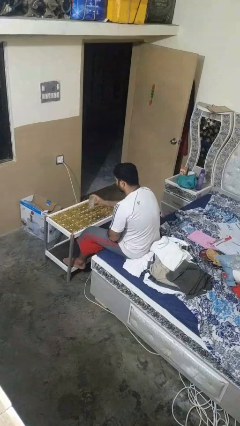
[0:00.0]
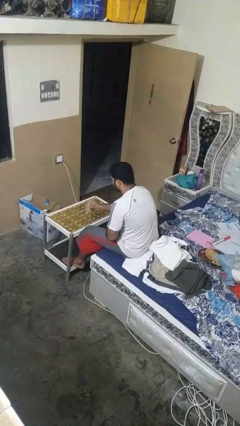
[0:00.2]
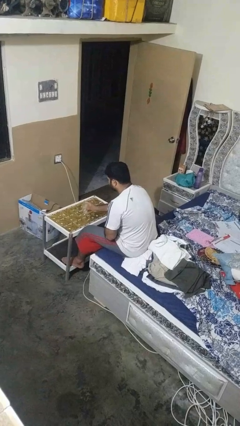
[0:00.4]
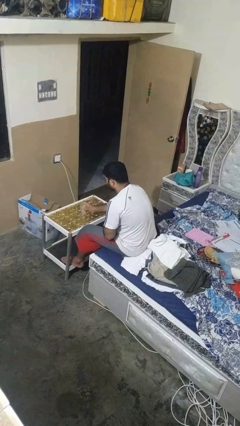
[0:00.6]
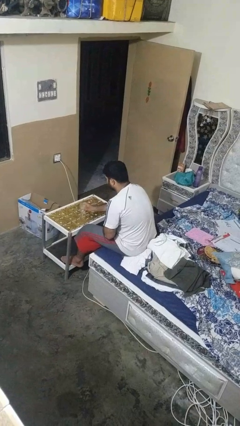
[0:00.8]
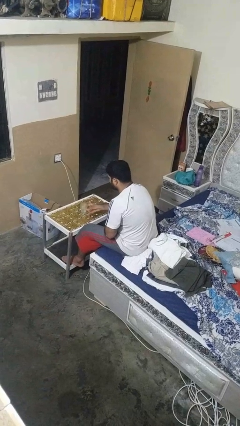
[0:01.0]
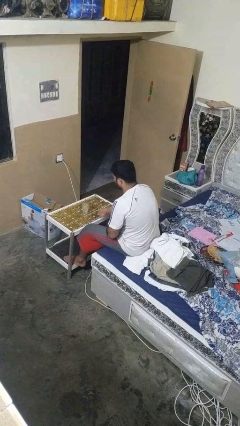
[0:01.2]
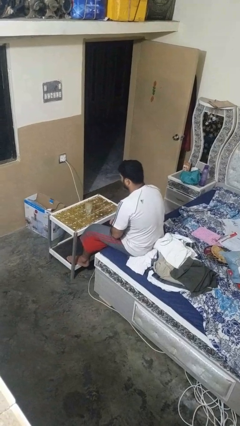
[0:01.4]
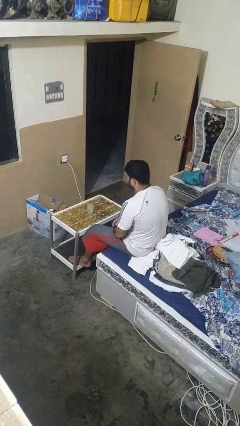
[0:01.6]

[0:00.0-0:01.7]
person puts down object on table

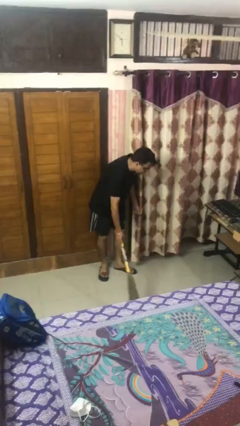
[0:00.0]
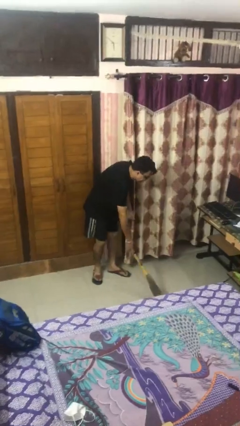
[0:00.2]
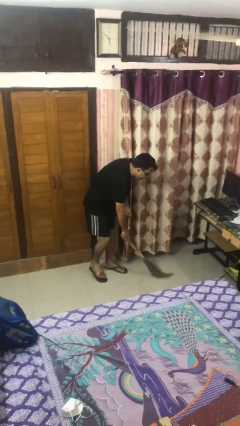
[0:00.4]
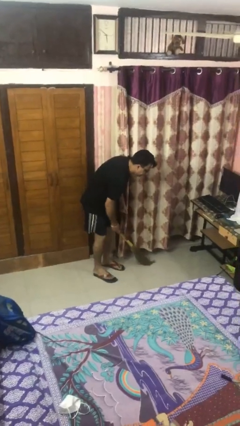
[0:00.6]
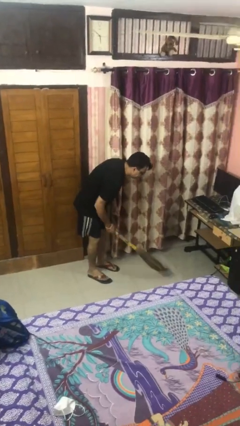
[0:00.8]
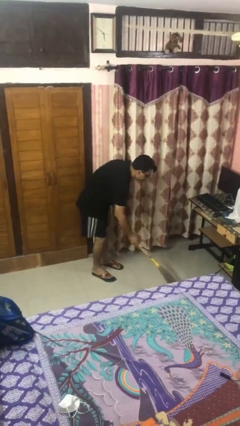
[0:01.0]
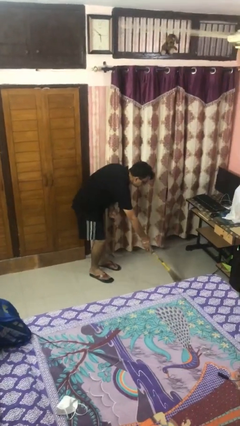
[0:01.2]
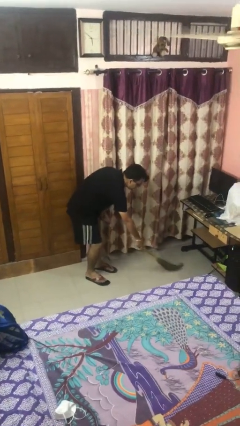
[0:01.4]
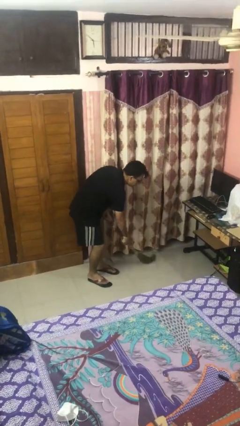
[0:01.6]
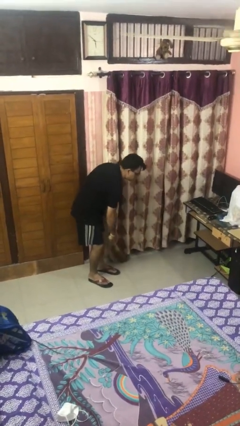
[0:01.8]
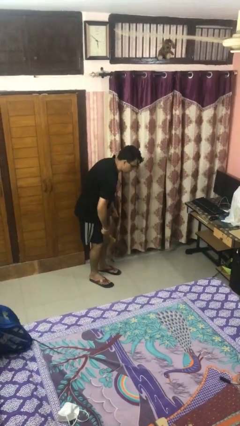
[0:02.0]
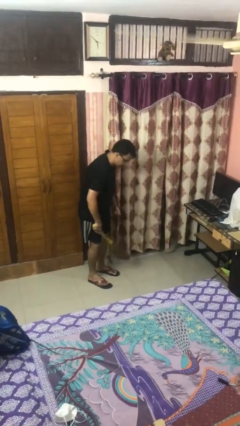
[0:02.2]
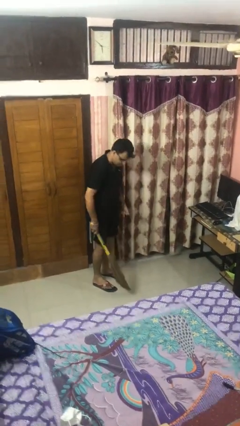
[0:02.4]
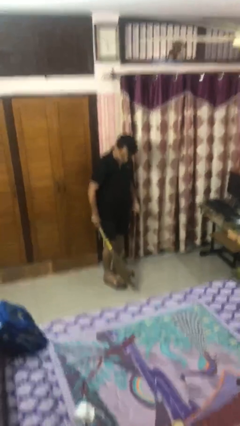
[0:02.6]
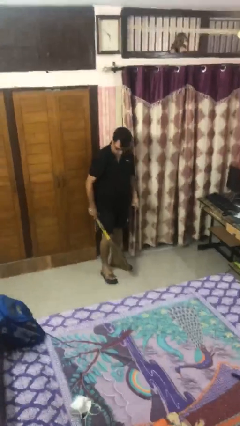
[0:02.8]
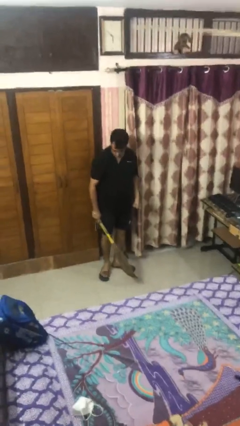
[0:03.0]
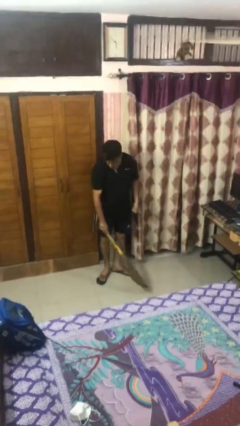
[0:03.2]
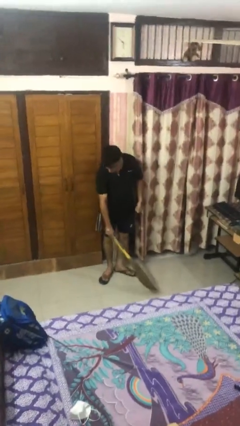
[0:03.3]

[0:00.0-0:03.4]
person sweeps floor

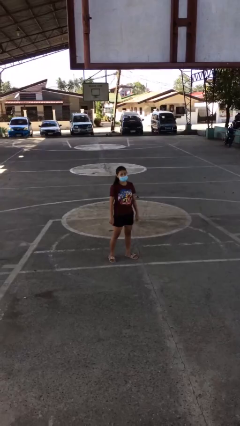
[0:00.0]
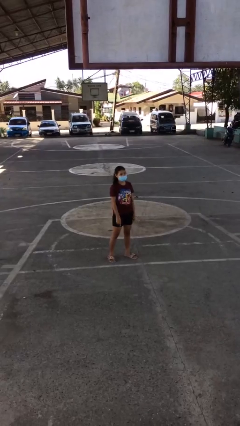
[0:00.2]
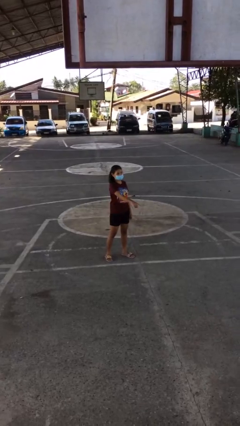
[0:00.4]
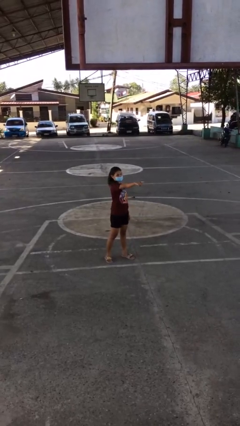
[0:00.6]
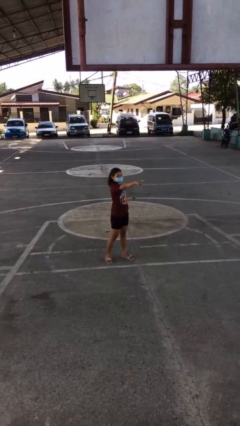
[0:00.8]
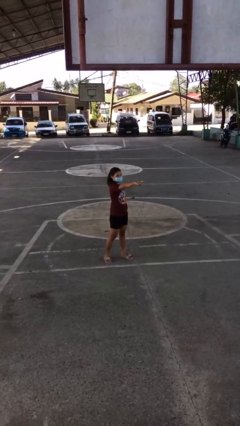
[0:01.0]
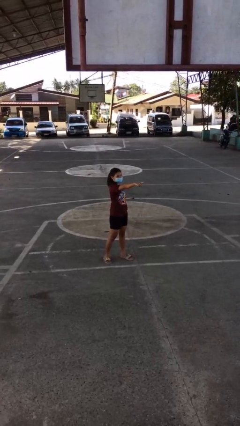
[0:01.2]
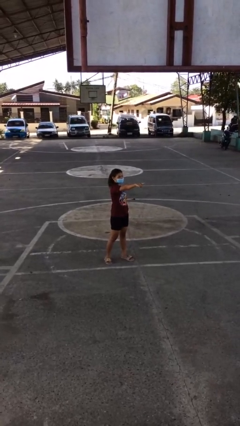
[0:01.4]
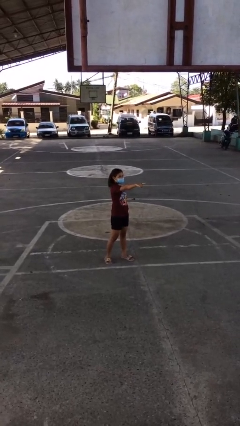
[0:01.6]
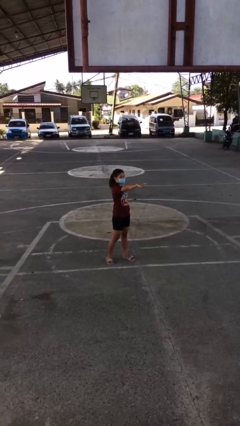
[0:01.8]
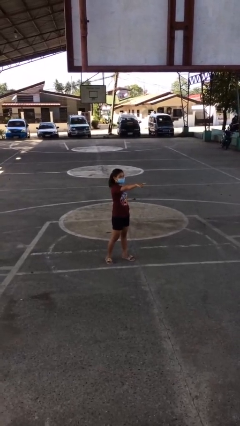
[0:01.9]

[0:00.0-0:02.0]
person points at person

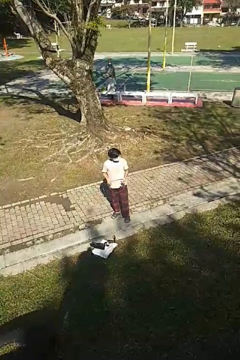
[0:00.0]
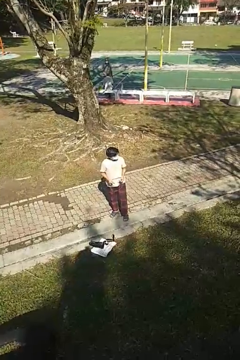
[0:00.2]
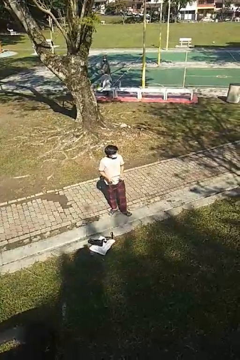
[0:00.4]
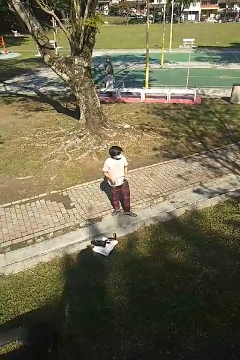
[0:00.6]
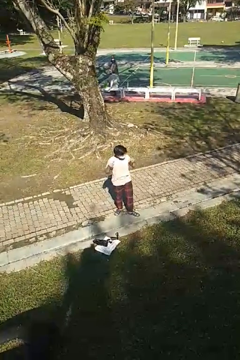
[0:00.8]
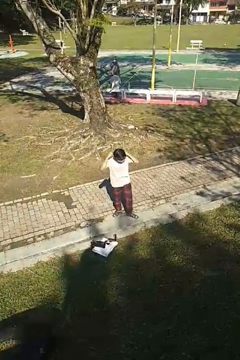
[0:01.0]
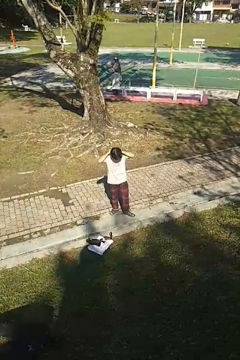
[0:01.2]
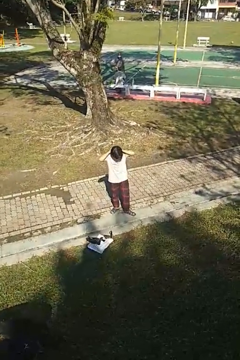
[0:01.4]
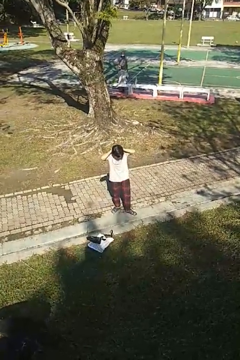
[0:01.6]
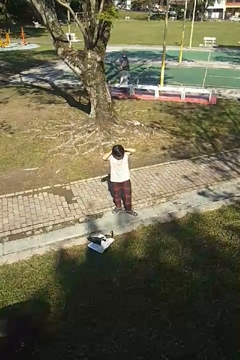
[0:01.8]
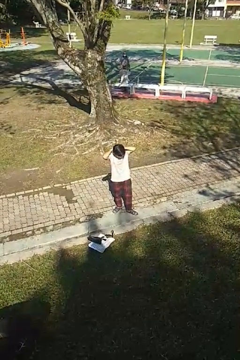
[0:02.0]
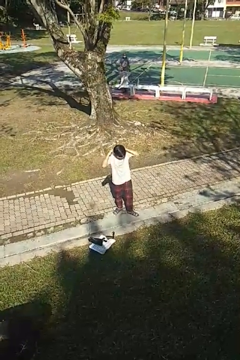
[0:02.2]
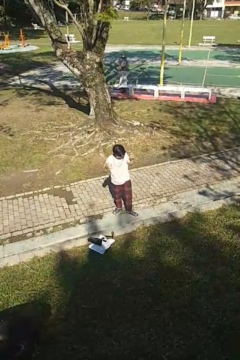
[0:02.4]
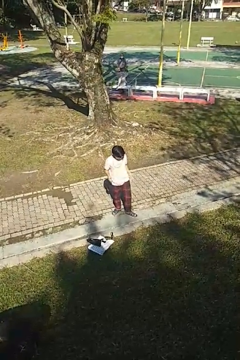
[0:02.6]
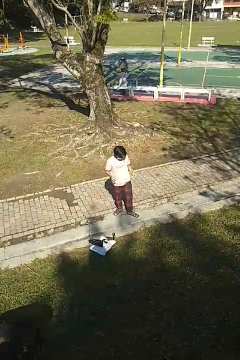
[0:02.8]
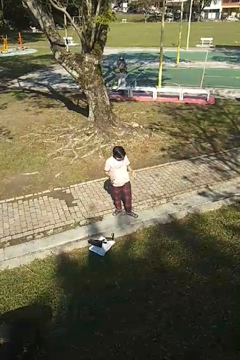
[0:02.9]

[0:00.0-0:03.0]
person puts on necklace

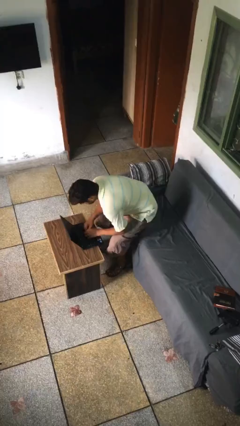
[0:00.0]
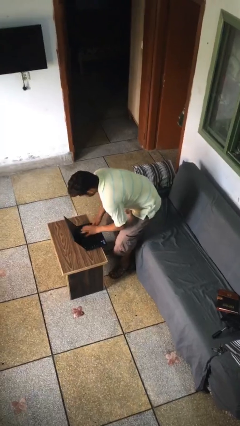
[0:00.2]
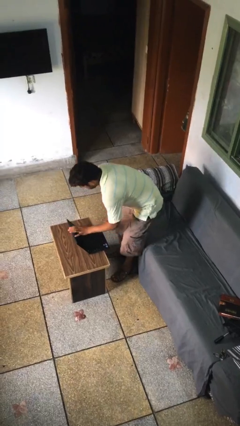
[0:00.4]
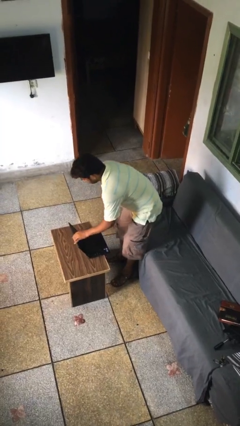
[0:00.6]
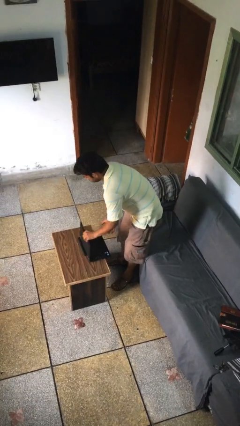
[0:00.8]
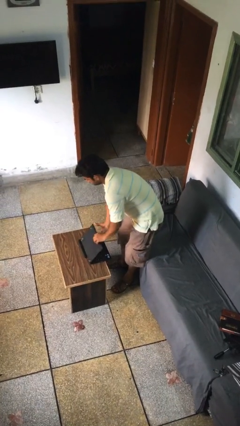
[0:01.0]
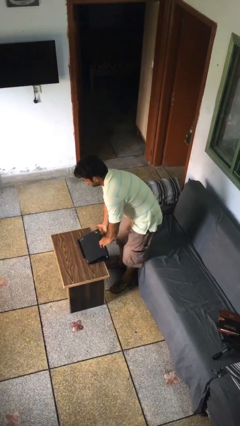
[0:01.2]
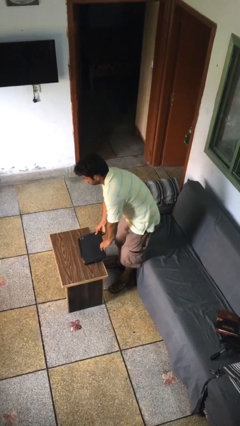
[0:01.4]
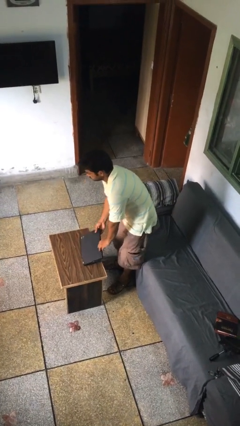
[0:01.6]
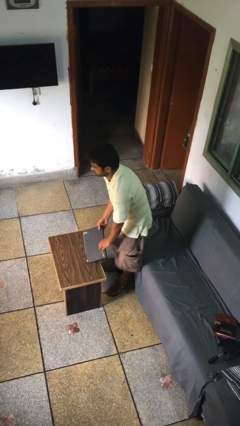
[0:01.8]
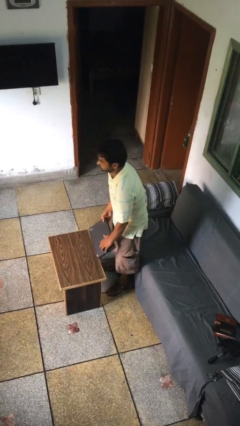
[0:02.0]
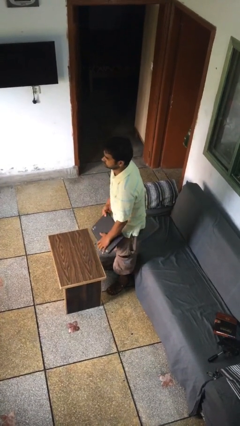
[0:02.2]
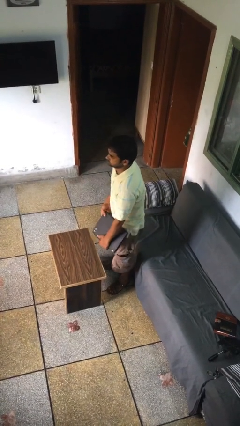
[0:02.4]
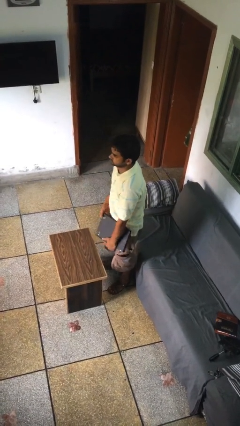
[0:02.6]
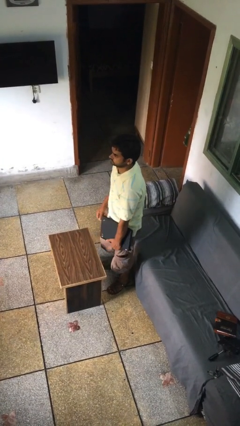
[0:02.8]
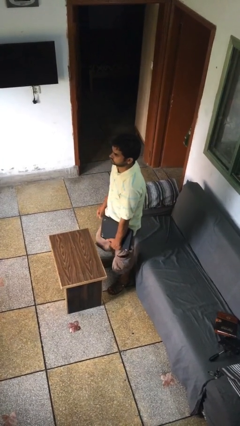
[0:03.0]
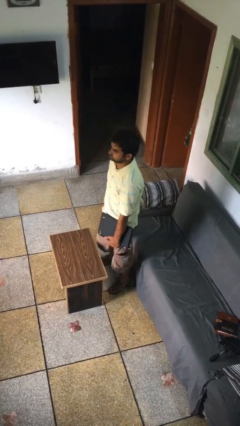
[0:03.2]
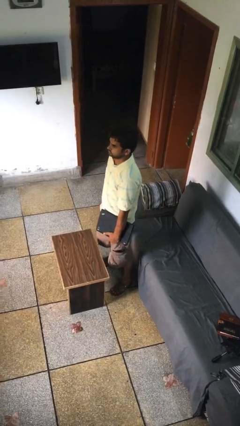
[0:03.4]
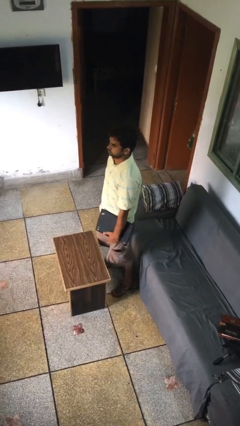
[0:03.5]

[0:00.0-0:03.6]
person stands up

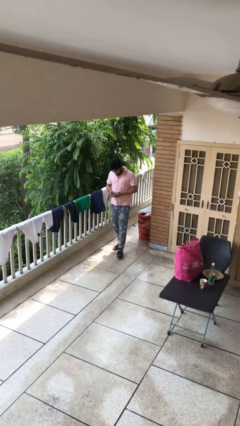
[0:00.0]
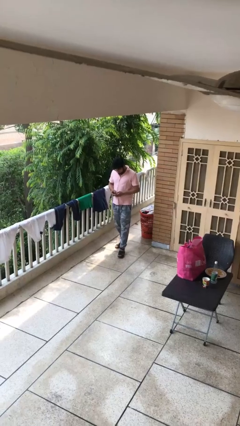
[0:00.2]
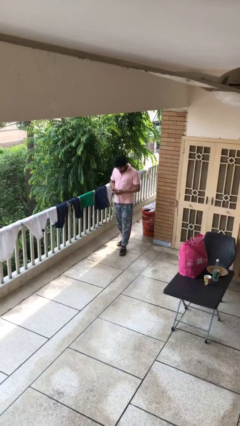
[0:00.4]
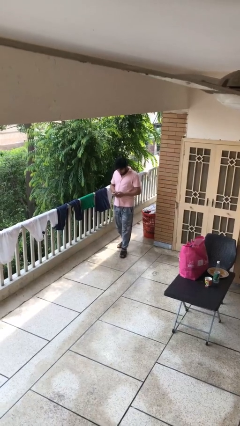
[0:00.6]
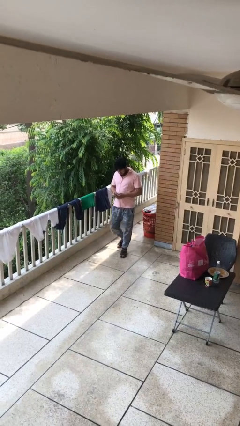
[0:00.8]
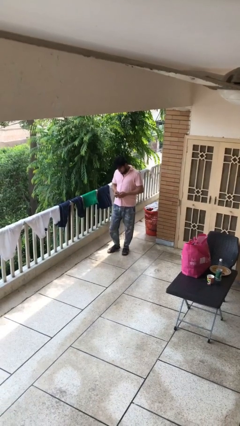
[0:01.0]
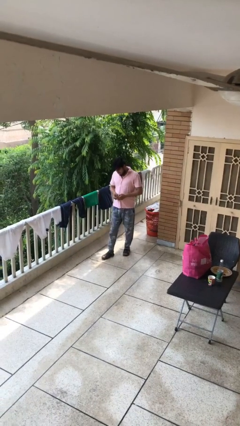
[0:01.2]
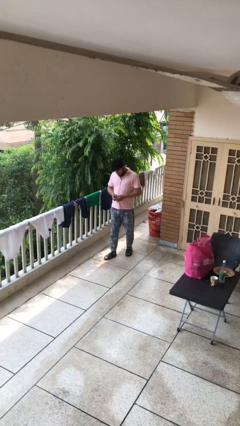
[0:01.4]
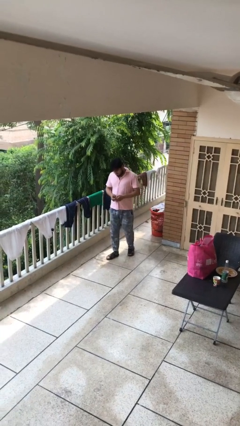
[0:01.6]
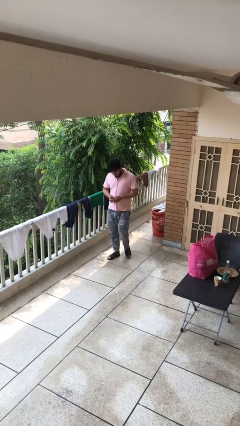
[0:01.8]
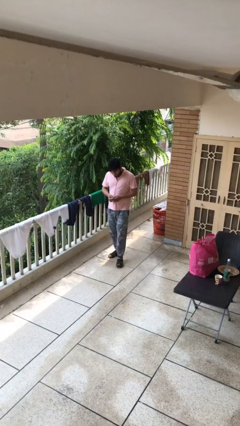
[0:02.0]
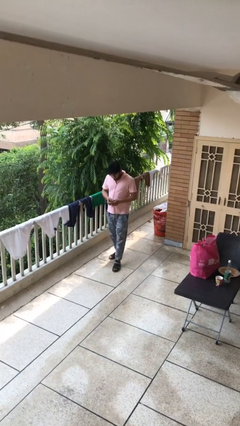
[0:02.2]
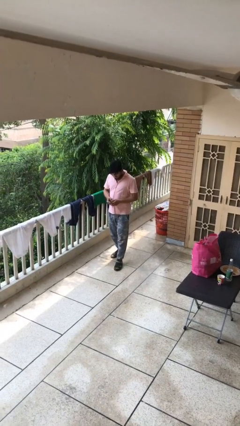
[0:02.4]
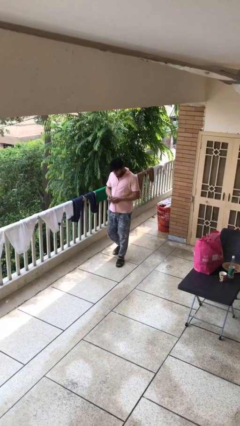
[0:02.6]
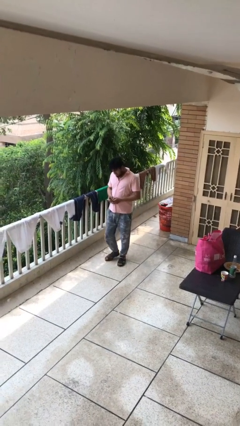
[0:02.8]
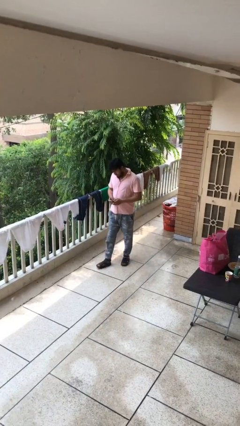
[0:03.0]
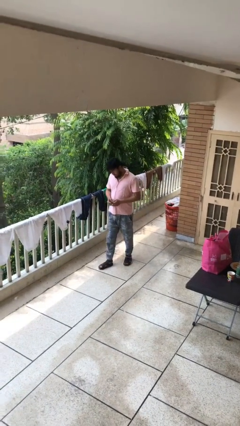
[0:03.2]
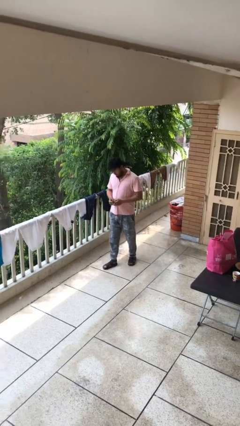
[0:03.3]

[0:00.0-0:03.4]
person texts on phone

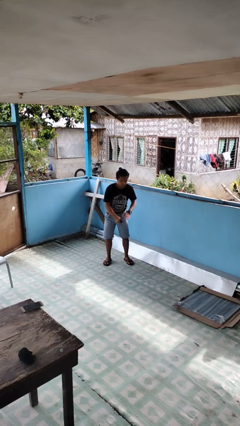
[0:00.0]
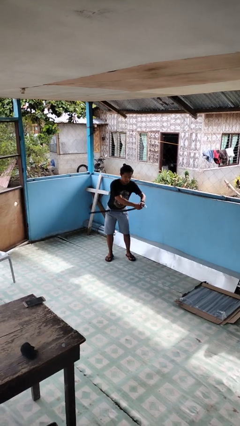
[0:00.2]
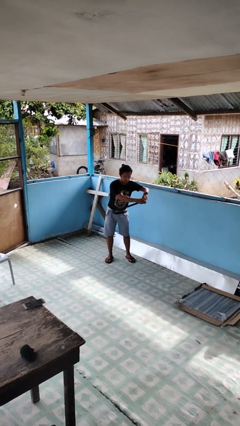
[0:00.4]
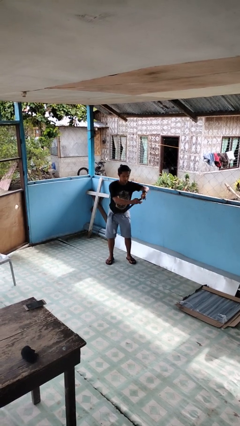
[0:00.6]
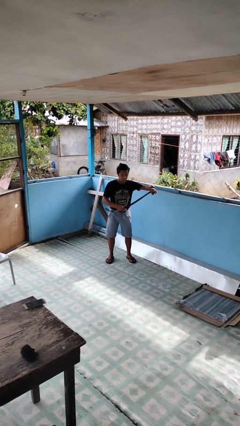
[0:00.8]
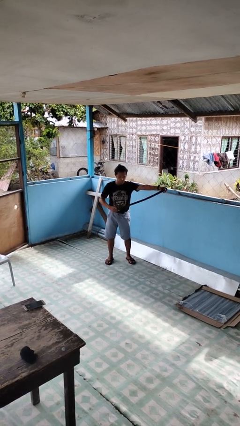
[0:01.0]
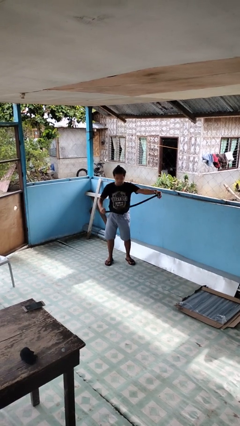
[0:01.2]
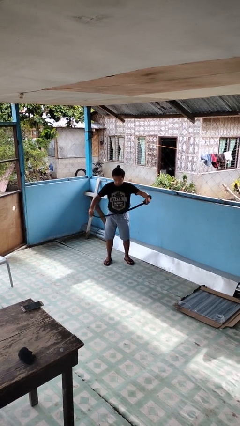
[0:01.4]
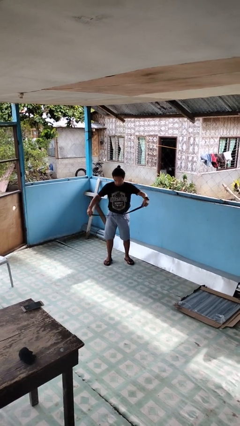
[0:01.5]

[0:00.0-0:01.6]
person takes off belt
